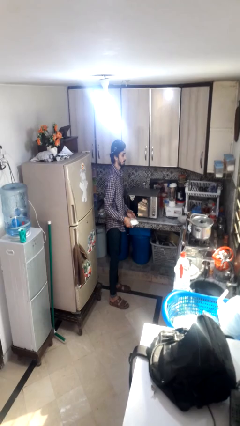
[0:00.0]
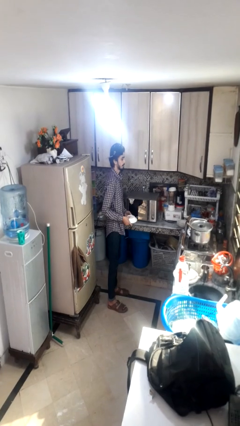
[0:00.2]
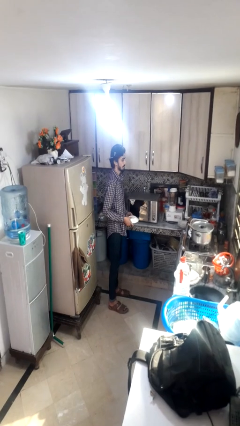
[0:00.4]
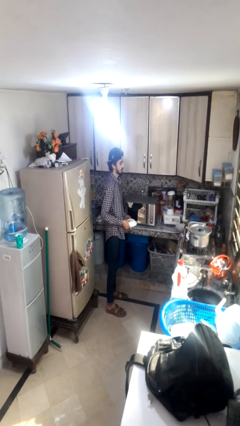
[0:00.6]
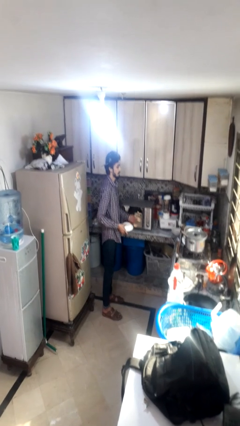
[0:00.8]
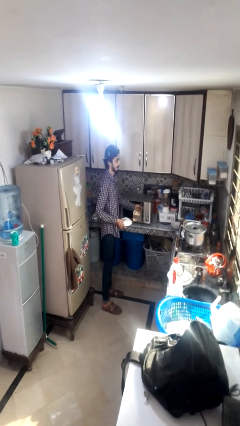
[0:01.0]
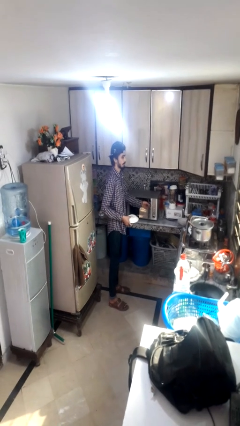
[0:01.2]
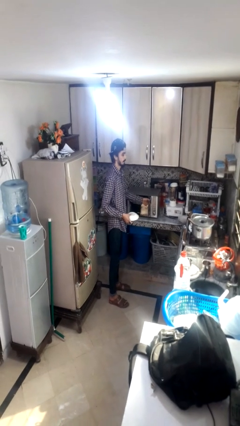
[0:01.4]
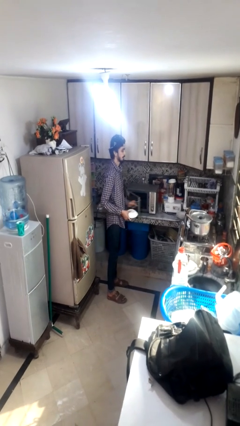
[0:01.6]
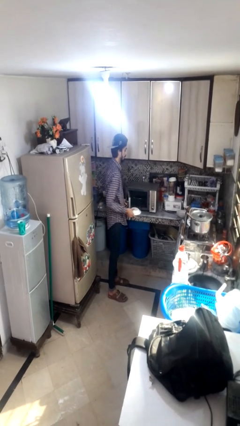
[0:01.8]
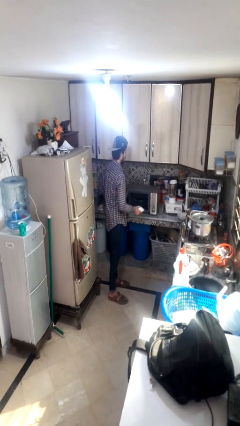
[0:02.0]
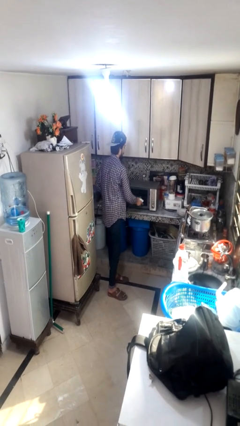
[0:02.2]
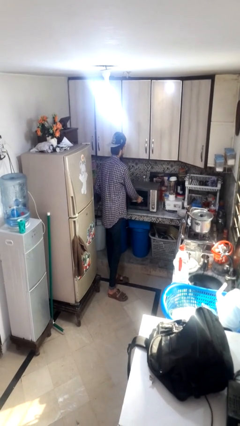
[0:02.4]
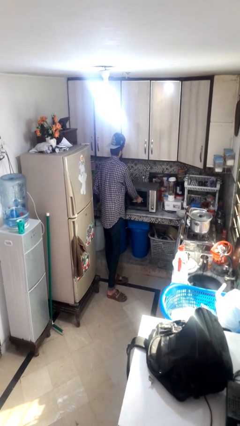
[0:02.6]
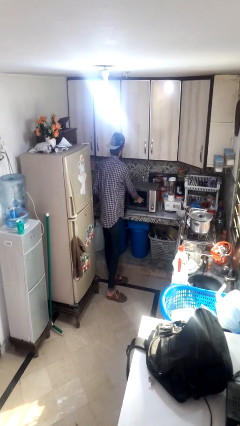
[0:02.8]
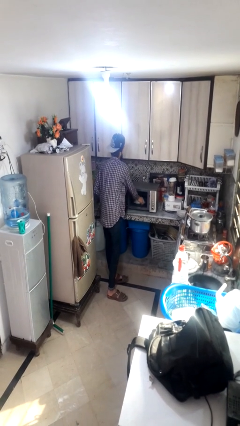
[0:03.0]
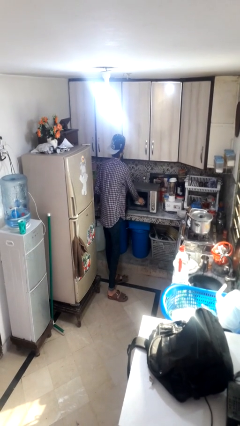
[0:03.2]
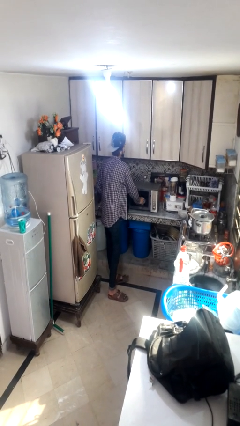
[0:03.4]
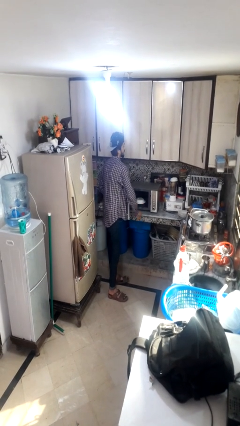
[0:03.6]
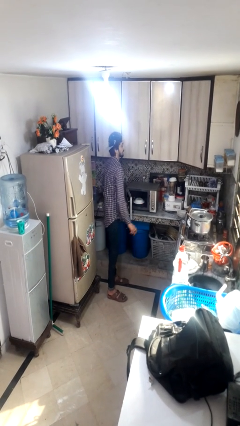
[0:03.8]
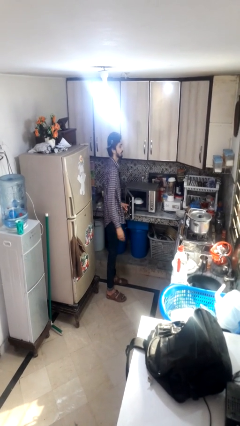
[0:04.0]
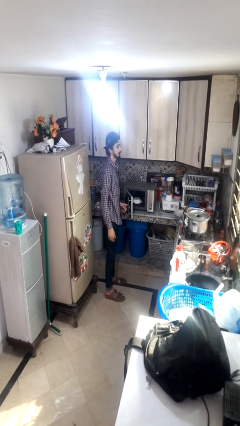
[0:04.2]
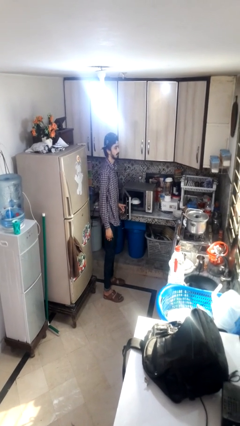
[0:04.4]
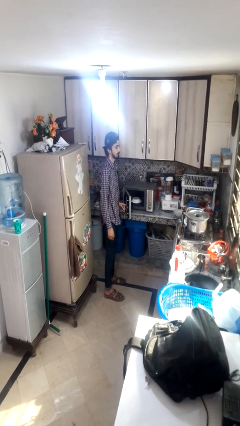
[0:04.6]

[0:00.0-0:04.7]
person opens microwave

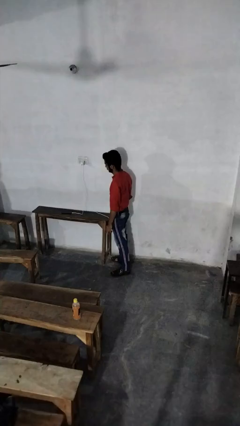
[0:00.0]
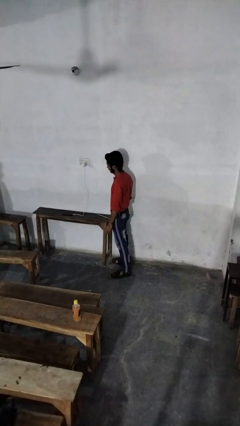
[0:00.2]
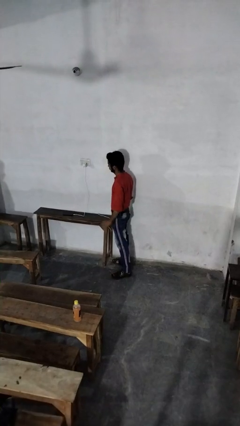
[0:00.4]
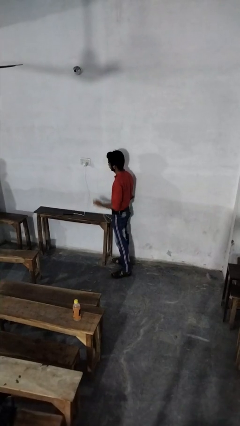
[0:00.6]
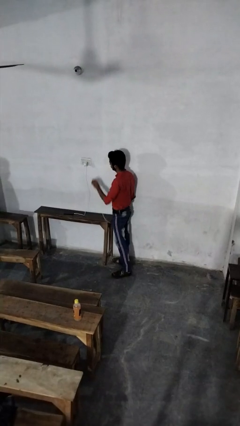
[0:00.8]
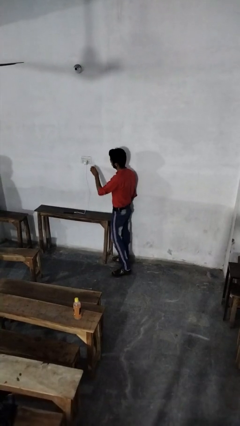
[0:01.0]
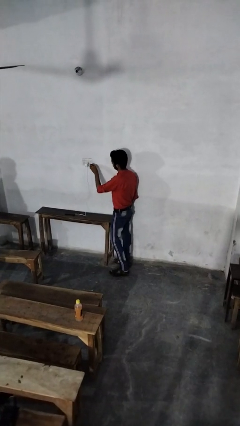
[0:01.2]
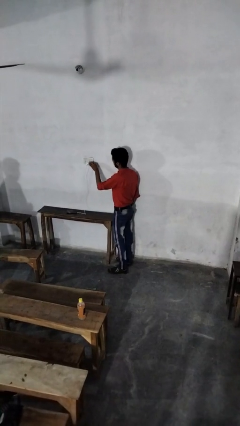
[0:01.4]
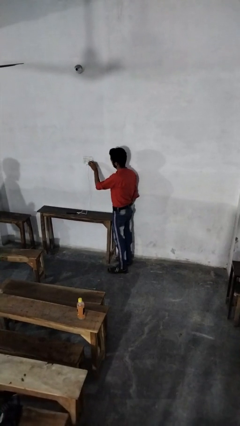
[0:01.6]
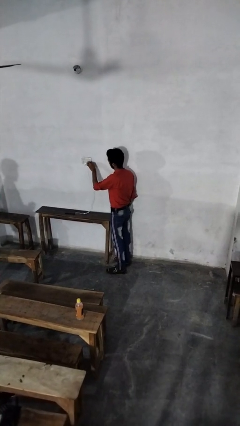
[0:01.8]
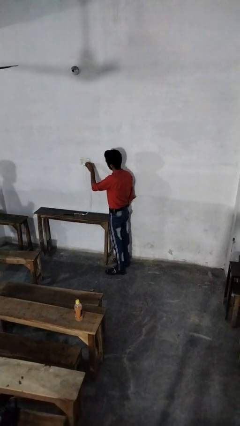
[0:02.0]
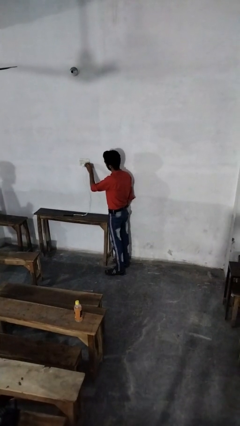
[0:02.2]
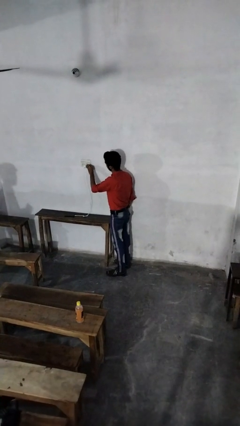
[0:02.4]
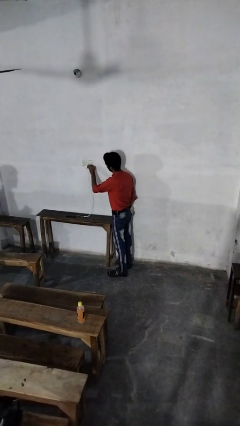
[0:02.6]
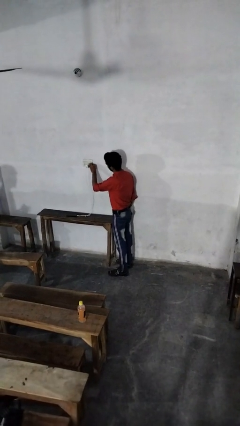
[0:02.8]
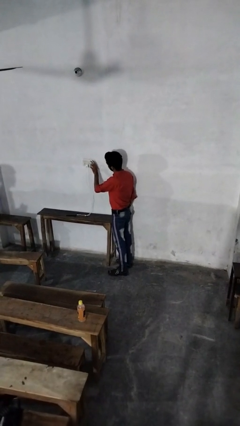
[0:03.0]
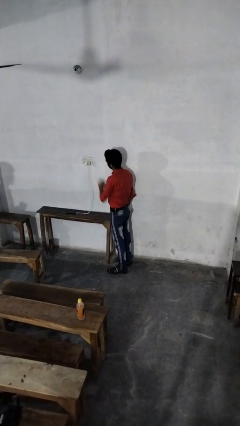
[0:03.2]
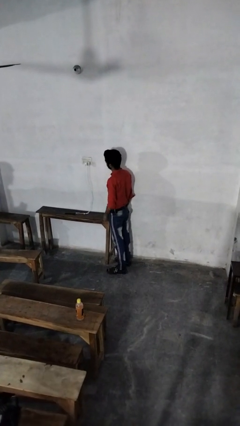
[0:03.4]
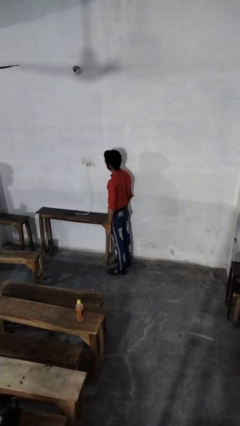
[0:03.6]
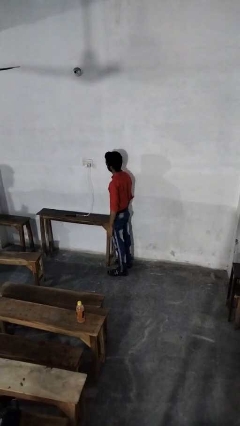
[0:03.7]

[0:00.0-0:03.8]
person plugs into electrical socket

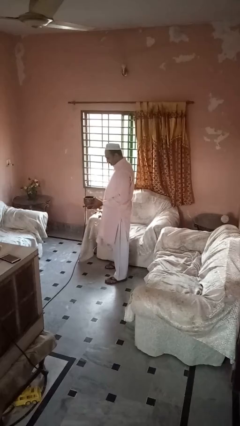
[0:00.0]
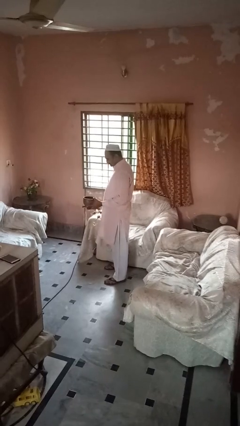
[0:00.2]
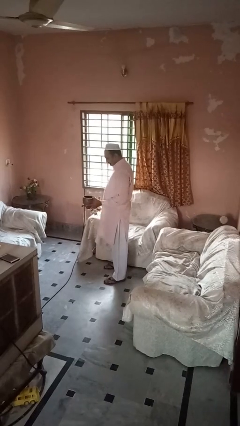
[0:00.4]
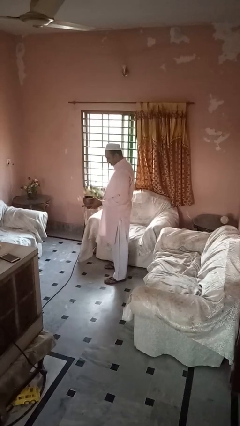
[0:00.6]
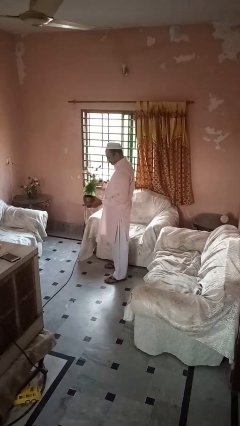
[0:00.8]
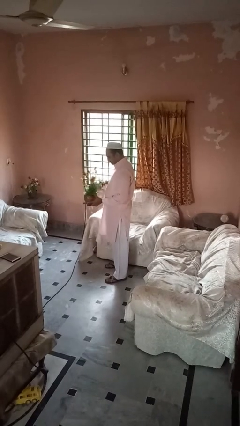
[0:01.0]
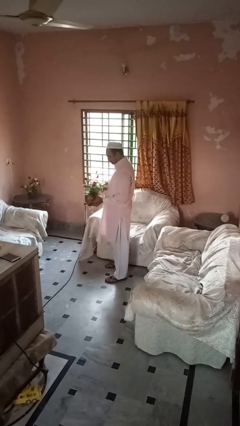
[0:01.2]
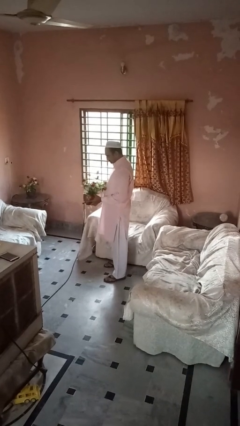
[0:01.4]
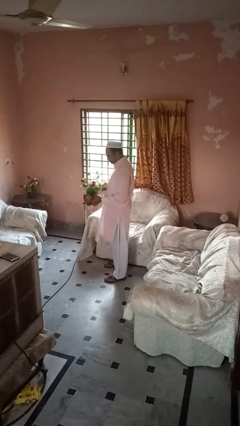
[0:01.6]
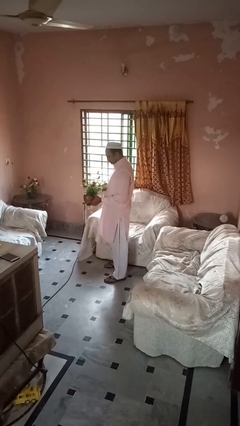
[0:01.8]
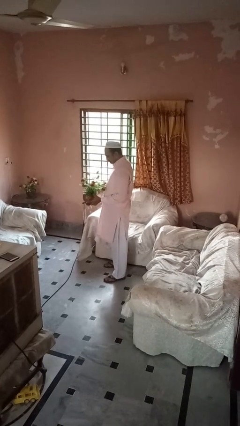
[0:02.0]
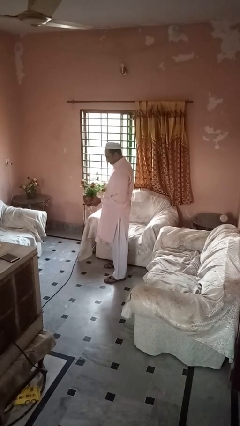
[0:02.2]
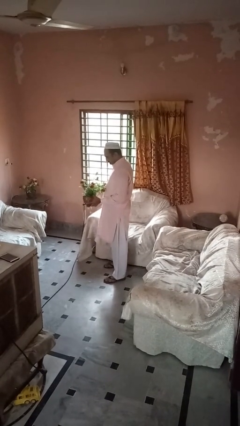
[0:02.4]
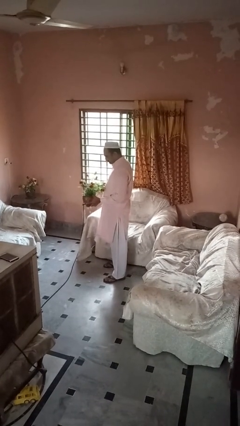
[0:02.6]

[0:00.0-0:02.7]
person arranges flowers in vase

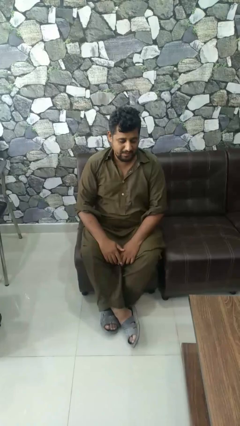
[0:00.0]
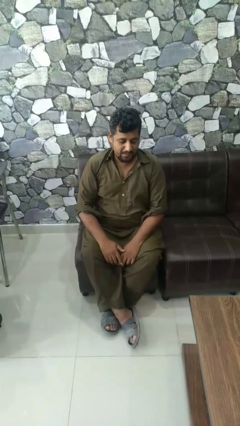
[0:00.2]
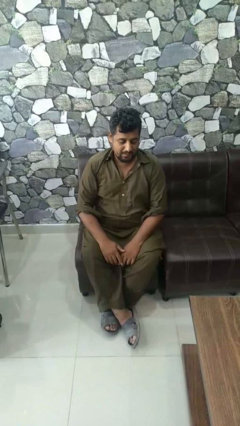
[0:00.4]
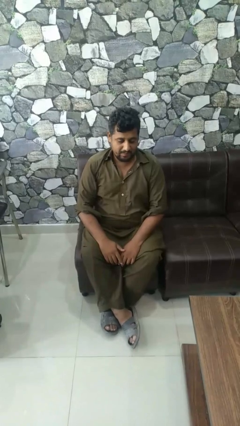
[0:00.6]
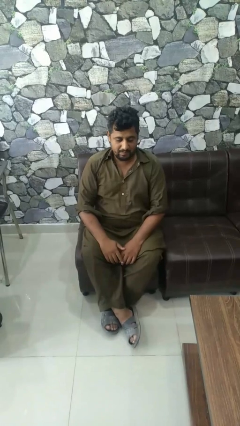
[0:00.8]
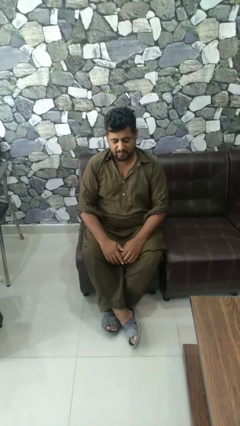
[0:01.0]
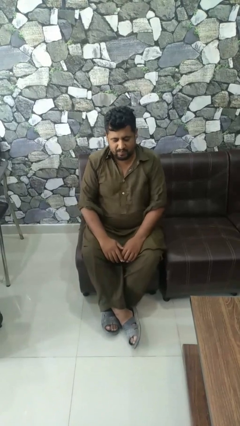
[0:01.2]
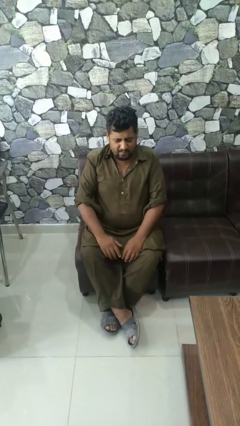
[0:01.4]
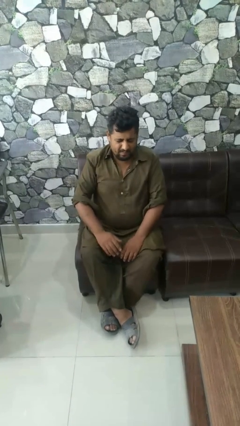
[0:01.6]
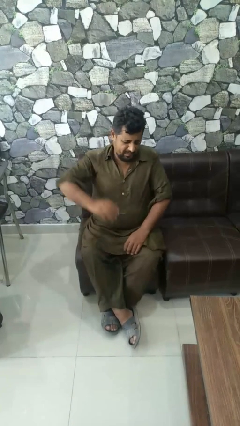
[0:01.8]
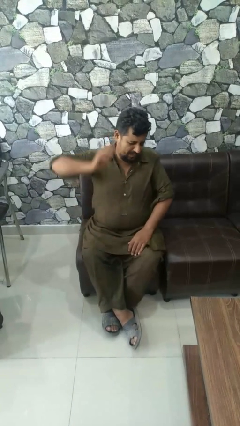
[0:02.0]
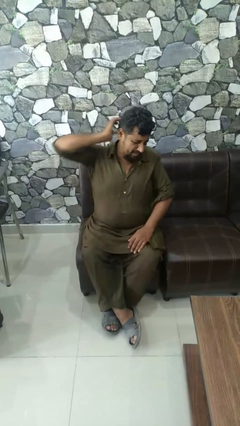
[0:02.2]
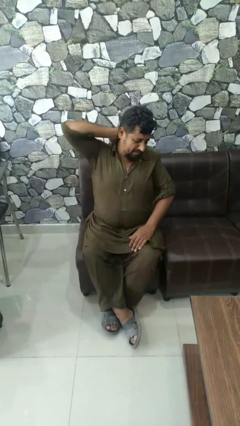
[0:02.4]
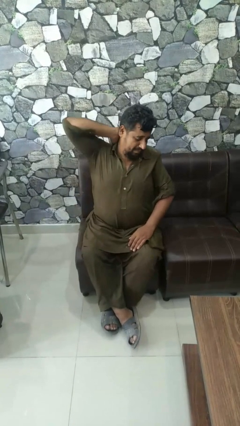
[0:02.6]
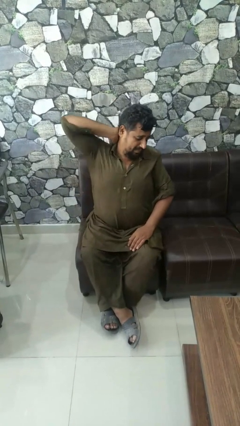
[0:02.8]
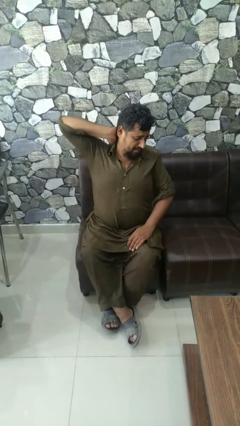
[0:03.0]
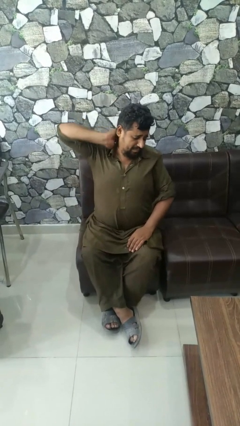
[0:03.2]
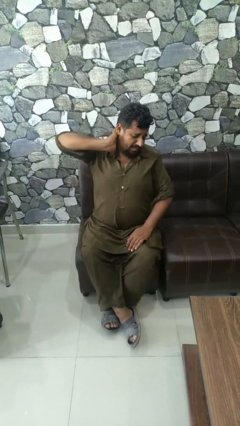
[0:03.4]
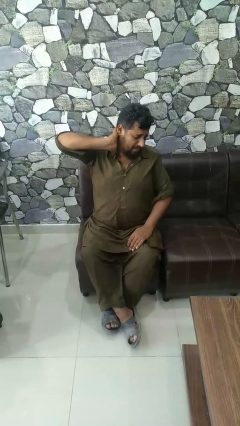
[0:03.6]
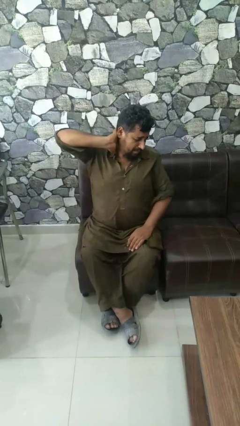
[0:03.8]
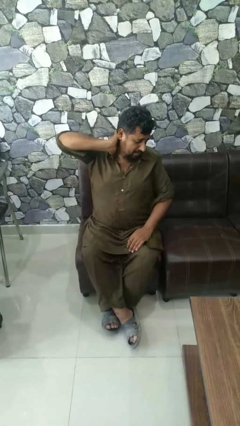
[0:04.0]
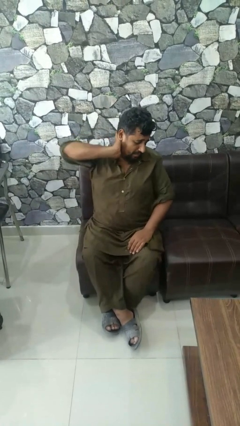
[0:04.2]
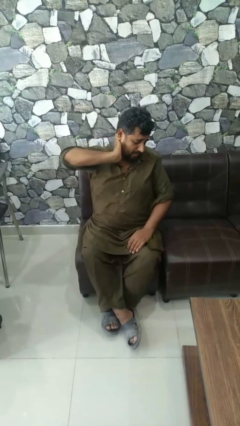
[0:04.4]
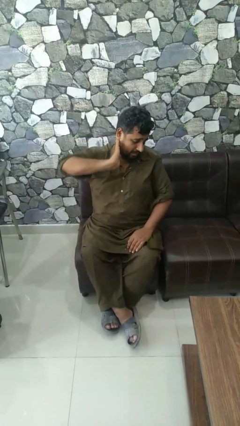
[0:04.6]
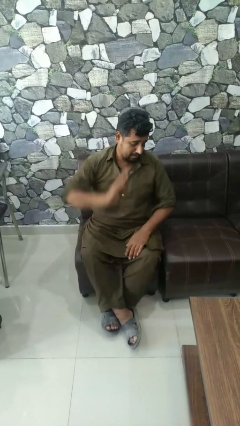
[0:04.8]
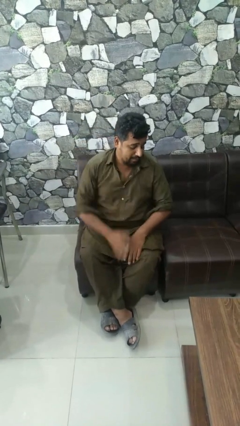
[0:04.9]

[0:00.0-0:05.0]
person rubs neck

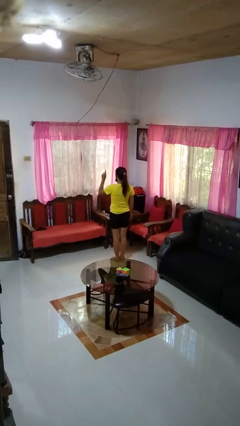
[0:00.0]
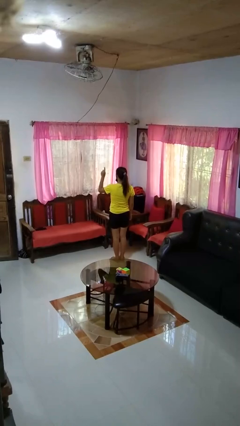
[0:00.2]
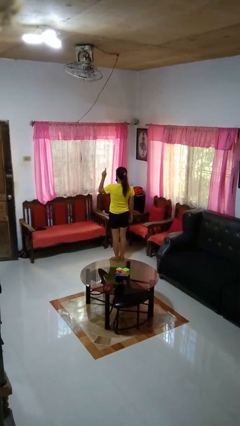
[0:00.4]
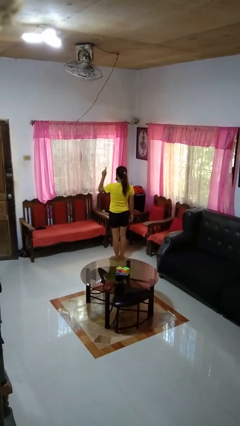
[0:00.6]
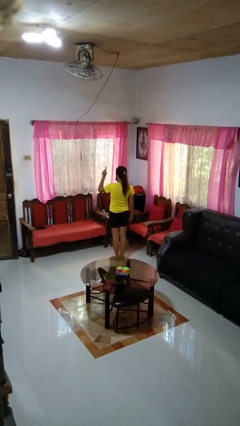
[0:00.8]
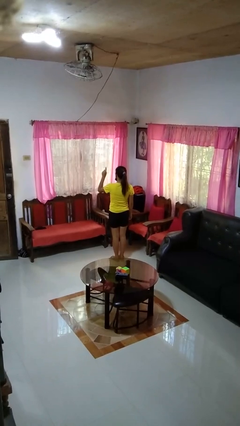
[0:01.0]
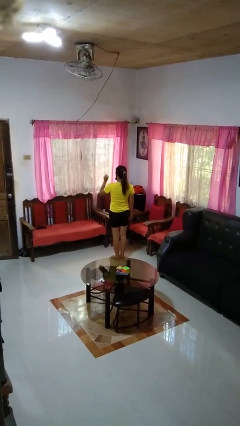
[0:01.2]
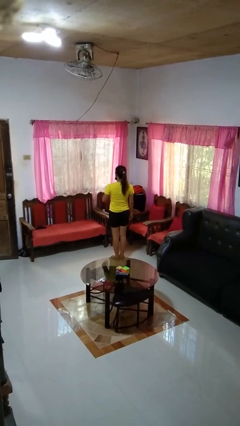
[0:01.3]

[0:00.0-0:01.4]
person gestures number one
